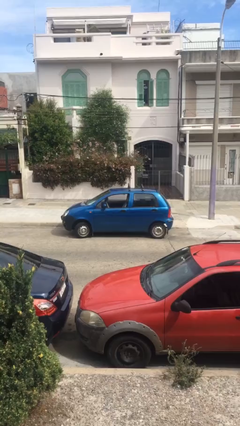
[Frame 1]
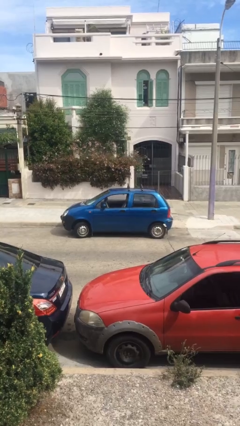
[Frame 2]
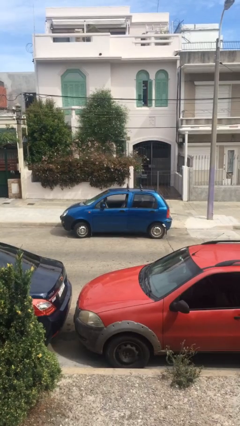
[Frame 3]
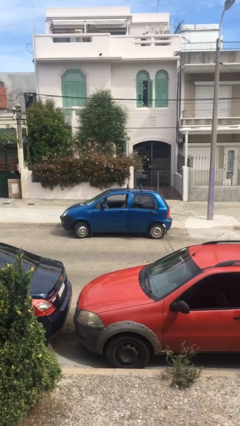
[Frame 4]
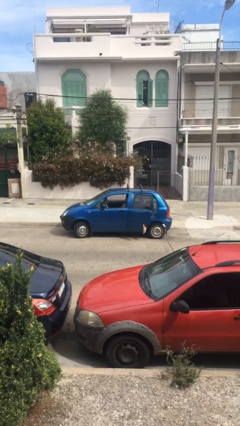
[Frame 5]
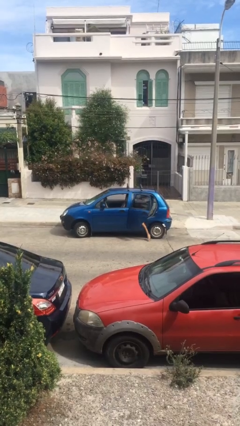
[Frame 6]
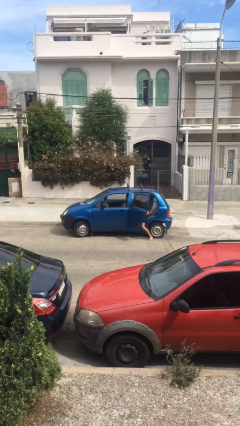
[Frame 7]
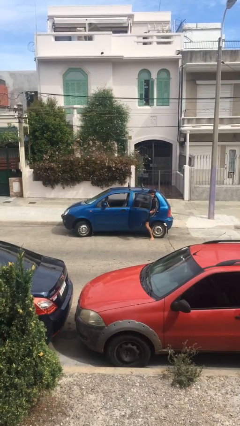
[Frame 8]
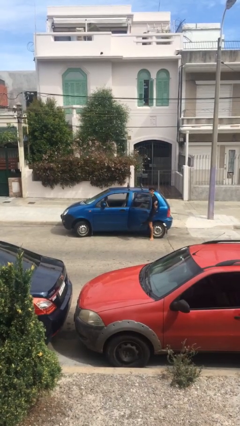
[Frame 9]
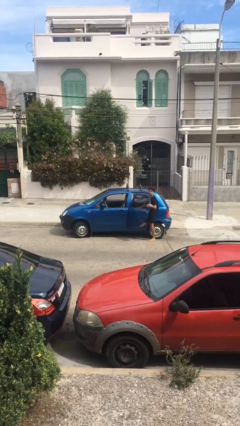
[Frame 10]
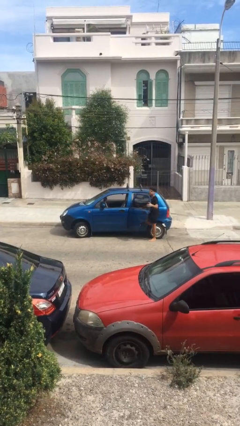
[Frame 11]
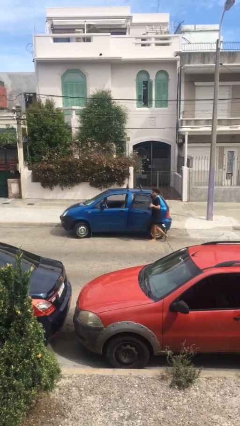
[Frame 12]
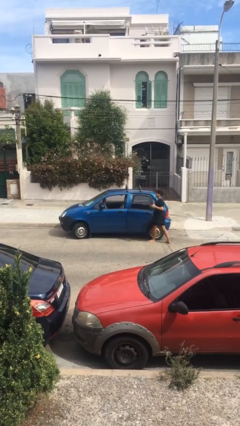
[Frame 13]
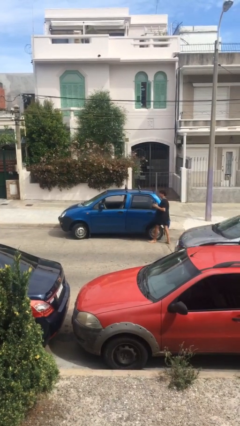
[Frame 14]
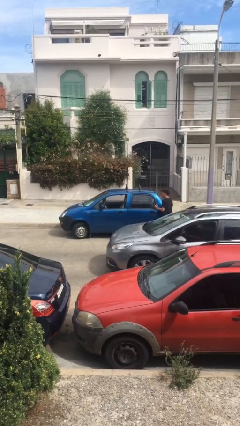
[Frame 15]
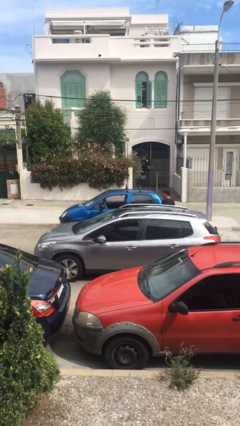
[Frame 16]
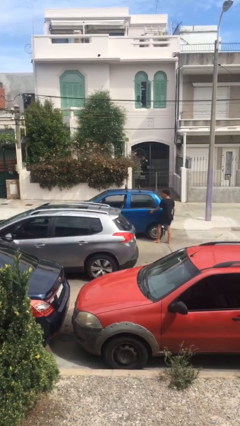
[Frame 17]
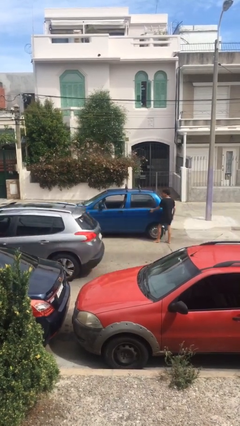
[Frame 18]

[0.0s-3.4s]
car drops off person

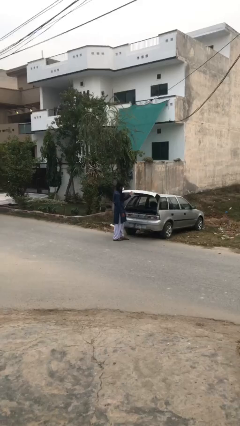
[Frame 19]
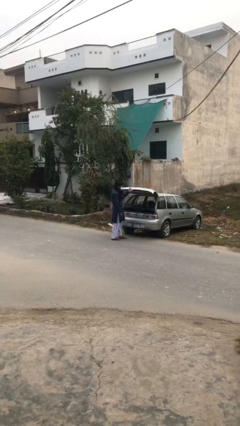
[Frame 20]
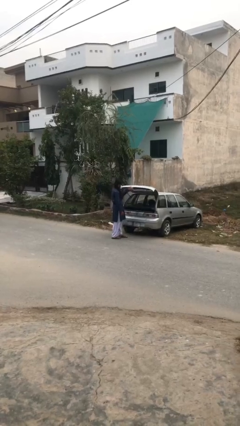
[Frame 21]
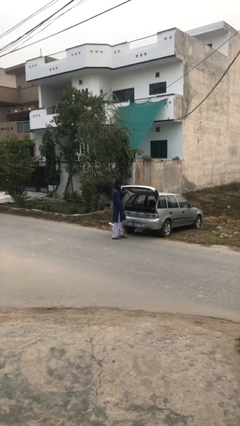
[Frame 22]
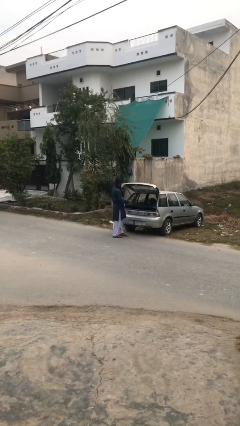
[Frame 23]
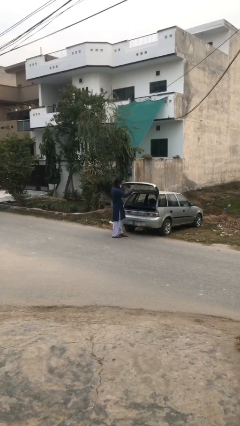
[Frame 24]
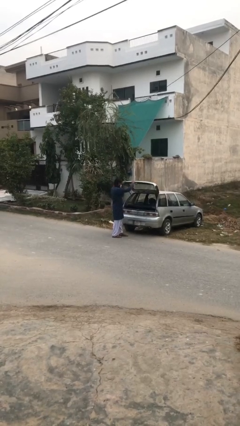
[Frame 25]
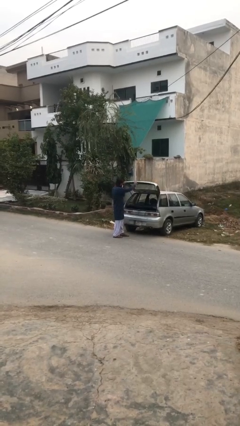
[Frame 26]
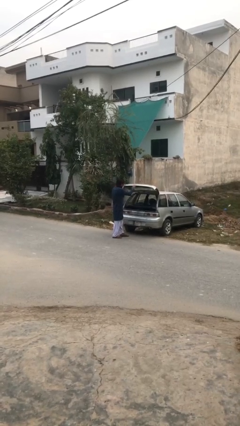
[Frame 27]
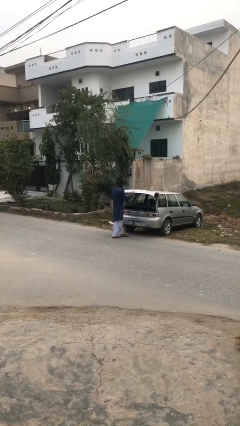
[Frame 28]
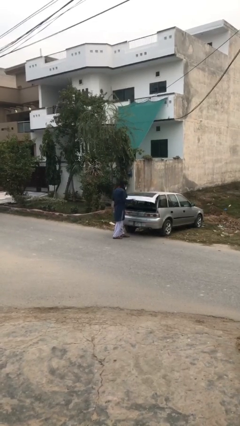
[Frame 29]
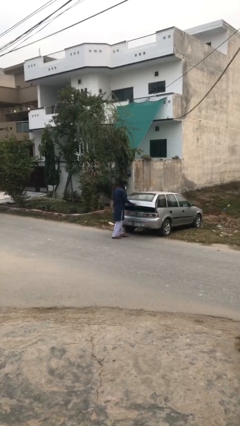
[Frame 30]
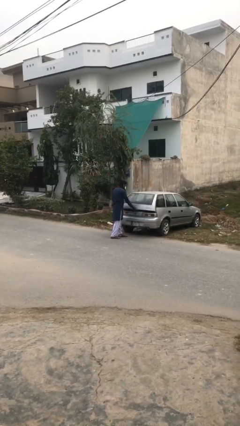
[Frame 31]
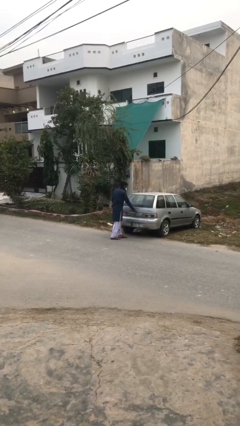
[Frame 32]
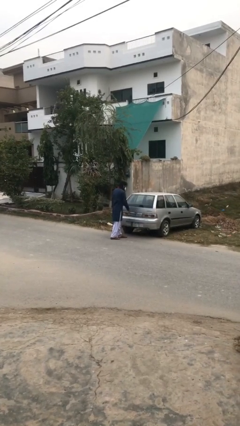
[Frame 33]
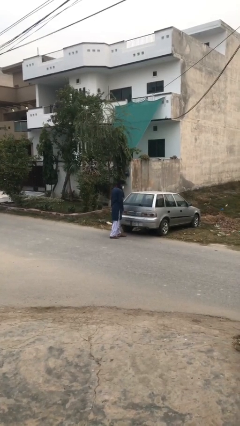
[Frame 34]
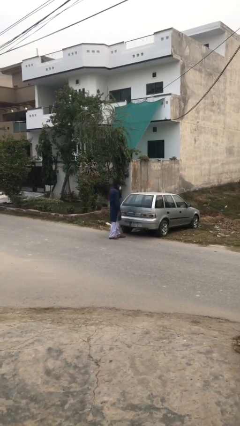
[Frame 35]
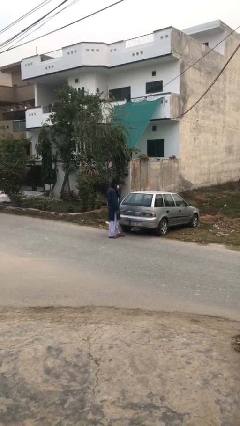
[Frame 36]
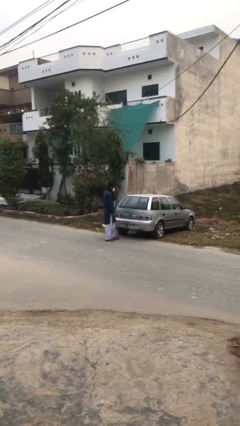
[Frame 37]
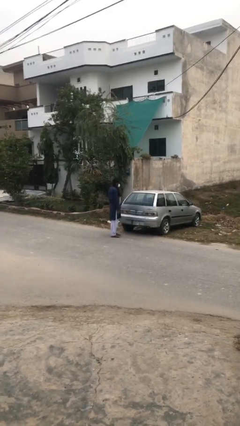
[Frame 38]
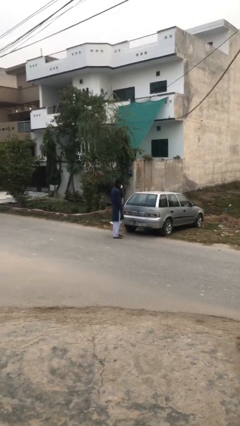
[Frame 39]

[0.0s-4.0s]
person closes car trunk

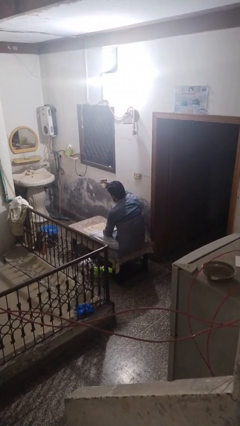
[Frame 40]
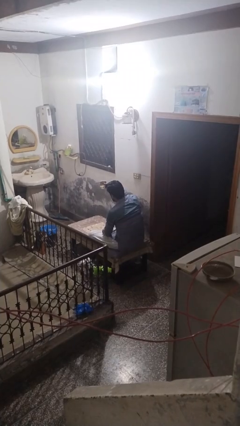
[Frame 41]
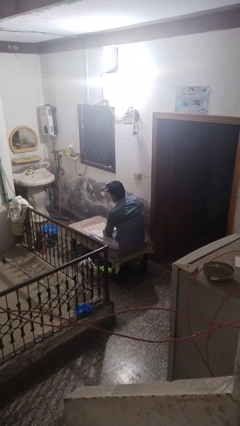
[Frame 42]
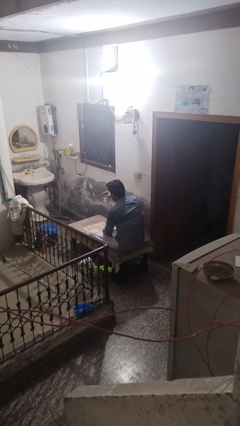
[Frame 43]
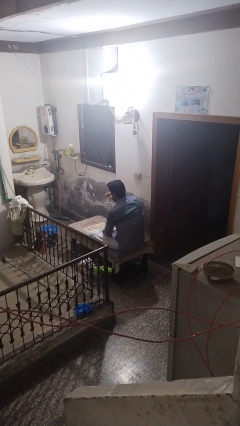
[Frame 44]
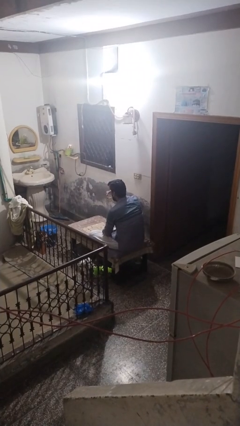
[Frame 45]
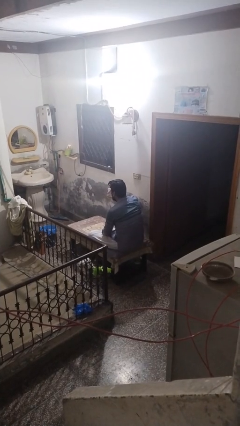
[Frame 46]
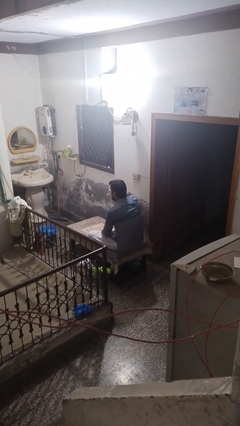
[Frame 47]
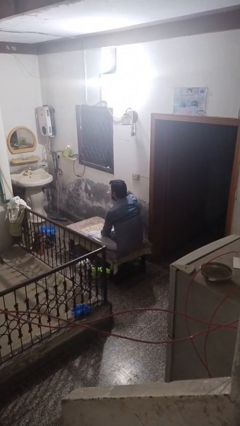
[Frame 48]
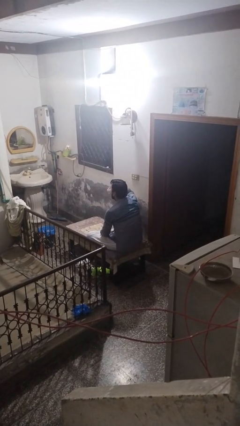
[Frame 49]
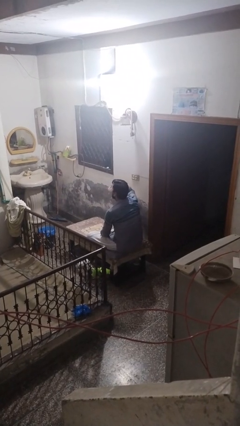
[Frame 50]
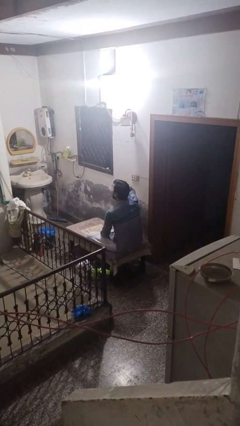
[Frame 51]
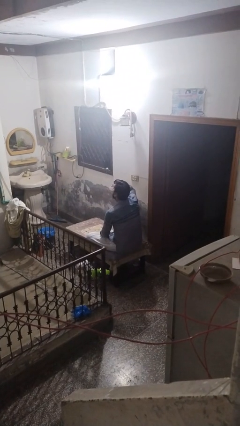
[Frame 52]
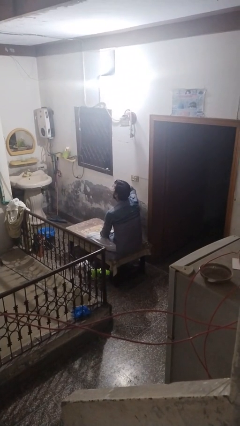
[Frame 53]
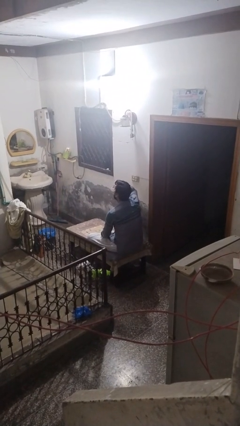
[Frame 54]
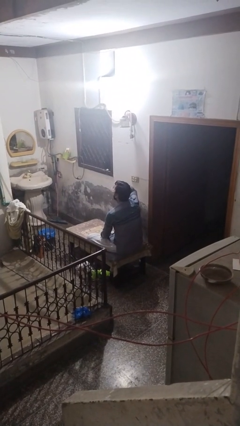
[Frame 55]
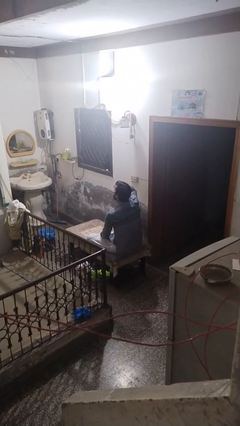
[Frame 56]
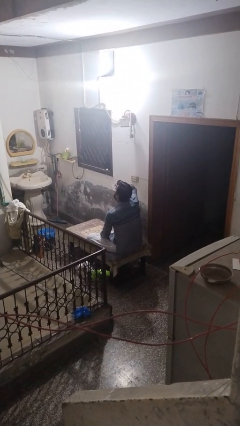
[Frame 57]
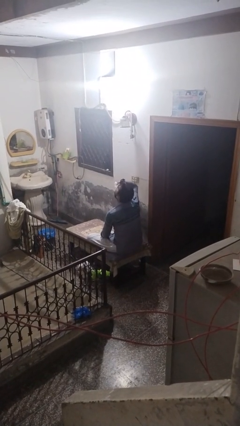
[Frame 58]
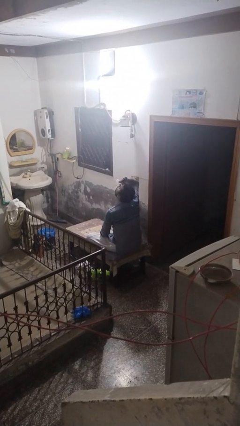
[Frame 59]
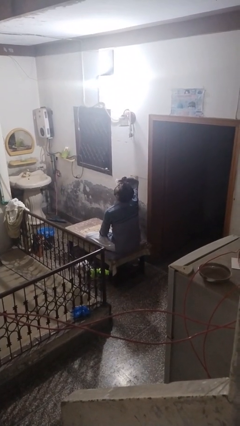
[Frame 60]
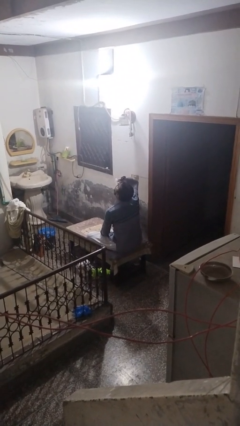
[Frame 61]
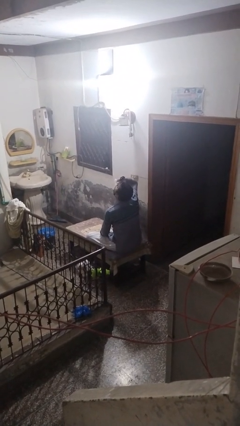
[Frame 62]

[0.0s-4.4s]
person drinks from shotglass

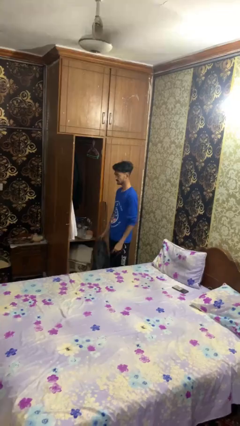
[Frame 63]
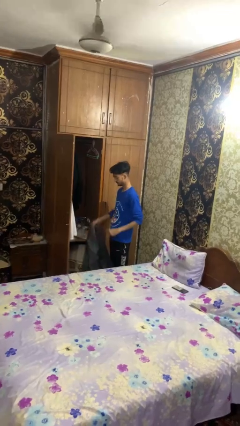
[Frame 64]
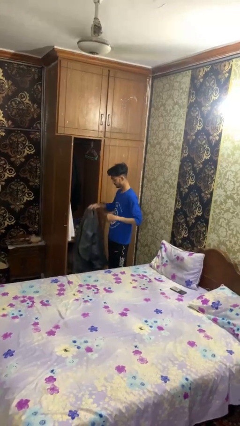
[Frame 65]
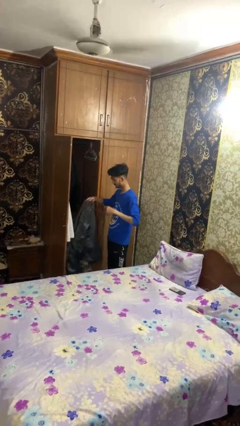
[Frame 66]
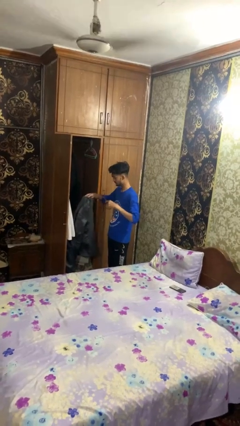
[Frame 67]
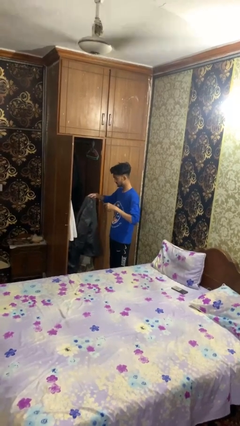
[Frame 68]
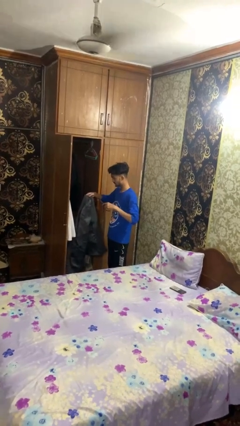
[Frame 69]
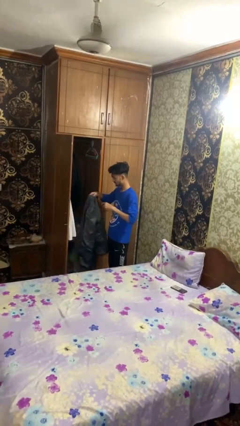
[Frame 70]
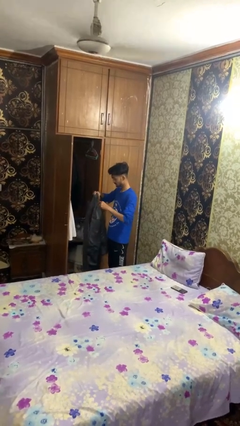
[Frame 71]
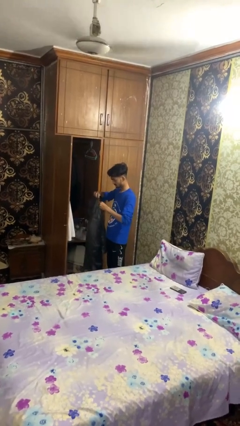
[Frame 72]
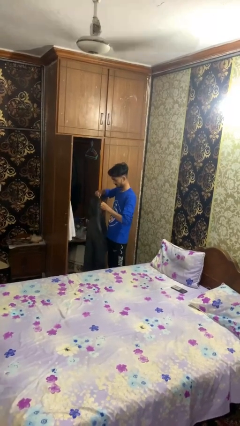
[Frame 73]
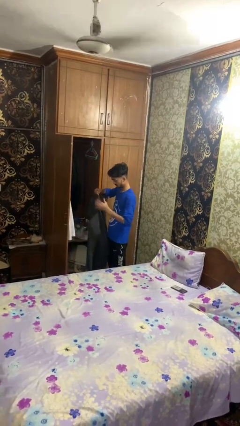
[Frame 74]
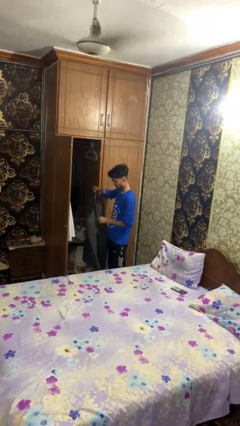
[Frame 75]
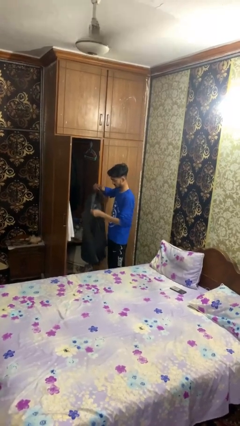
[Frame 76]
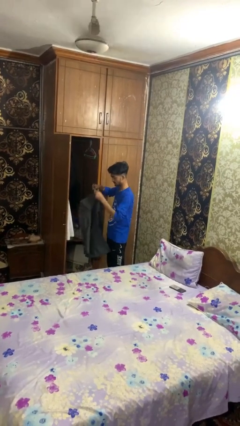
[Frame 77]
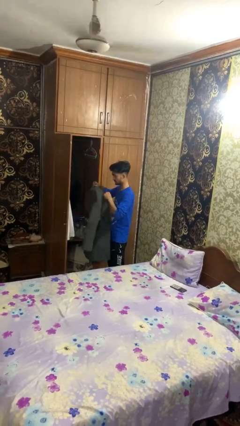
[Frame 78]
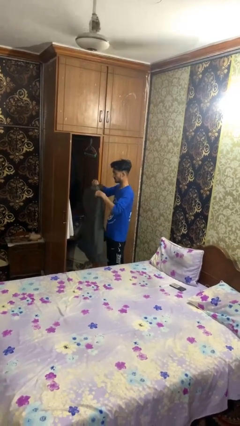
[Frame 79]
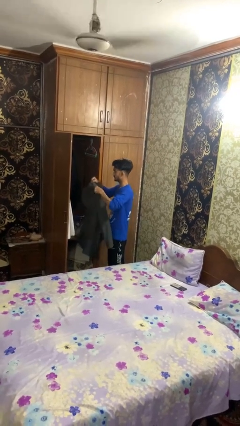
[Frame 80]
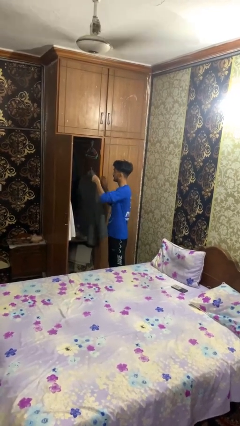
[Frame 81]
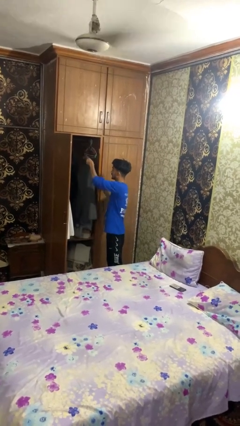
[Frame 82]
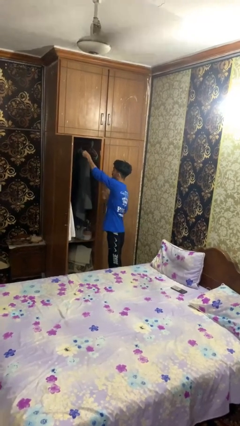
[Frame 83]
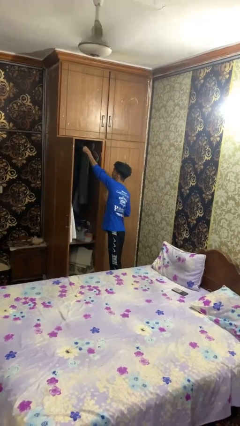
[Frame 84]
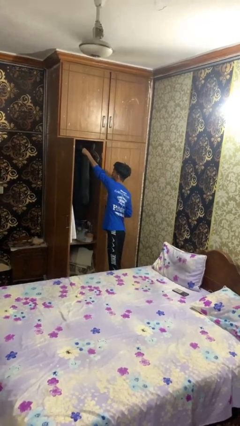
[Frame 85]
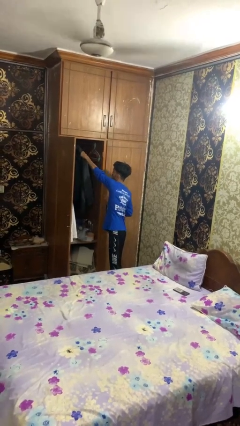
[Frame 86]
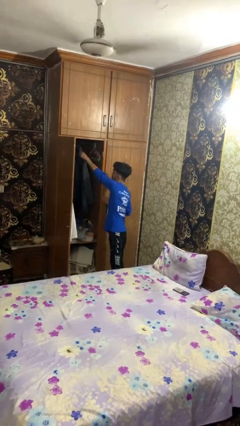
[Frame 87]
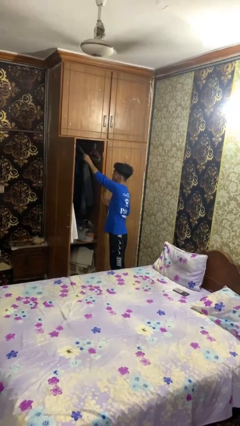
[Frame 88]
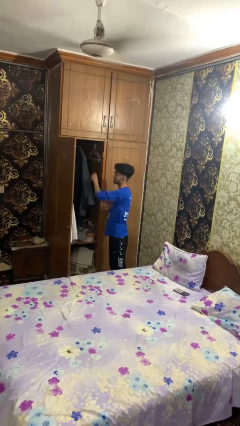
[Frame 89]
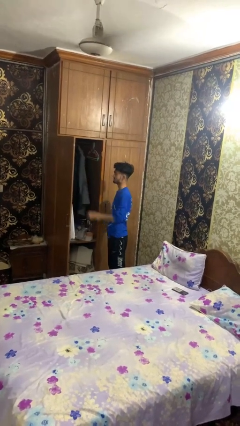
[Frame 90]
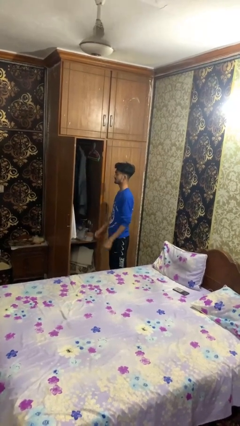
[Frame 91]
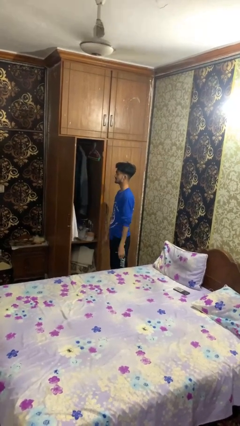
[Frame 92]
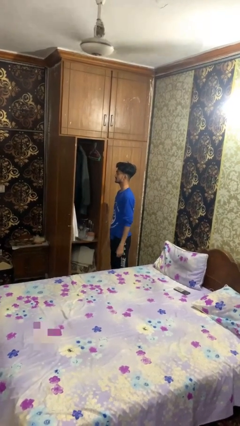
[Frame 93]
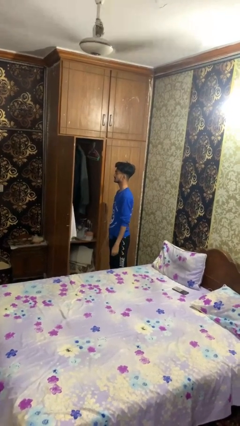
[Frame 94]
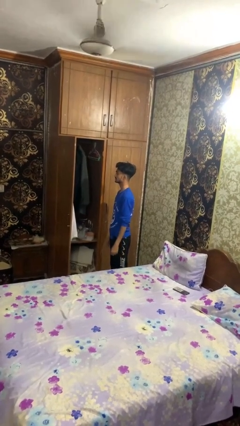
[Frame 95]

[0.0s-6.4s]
person puts clothes into closet
